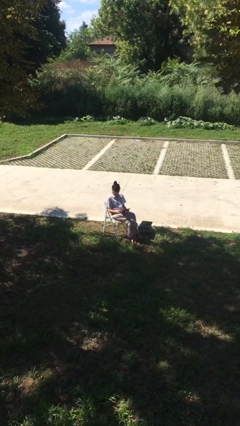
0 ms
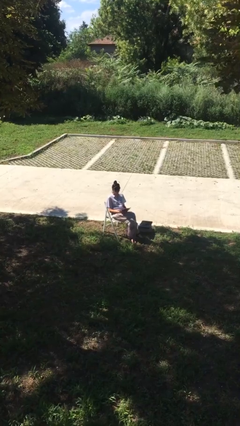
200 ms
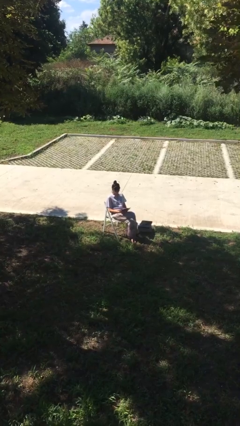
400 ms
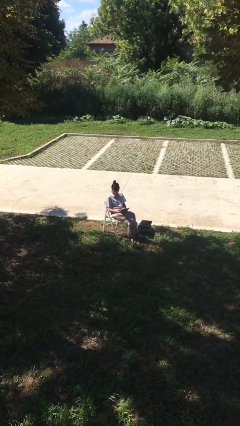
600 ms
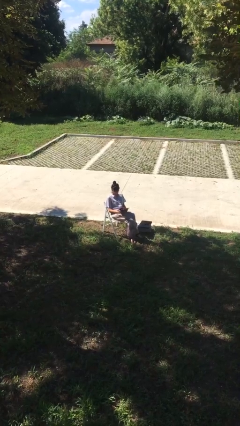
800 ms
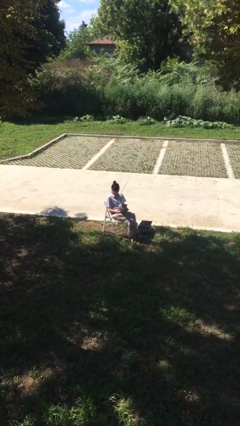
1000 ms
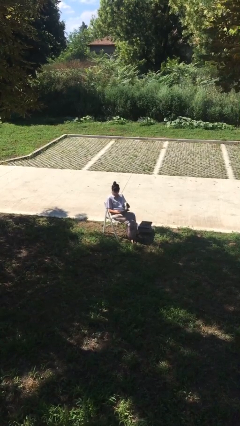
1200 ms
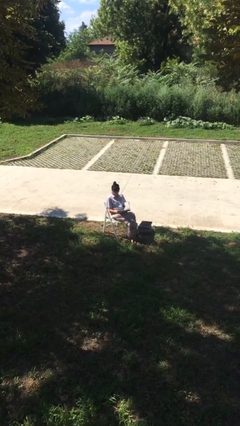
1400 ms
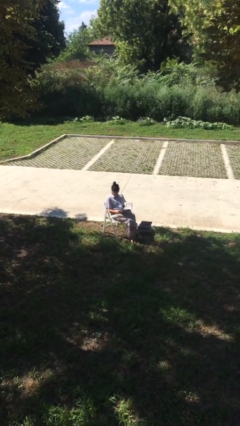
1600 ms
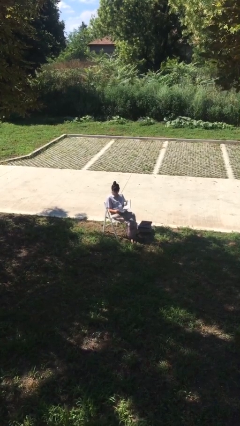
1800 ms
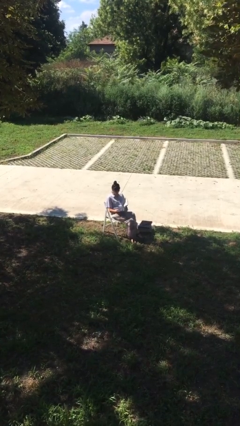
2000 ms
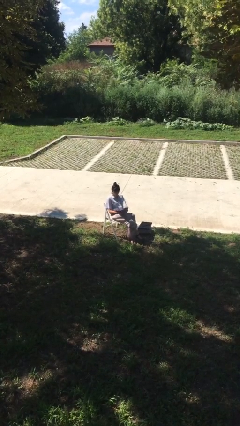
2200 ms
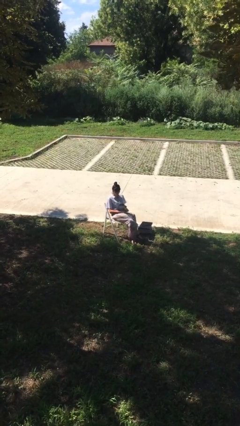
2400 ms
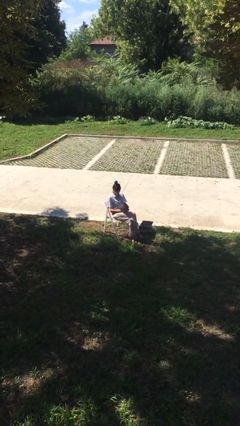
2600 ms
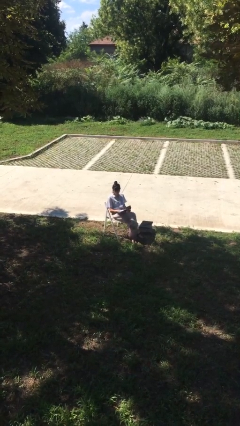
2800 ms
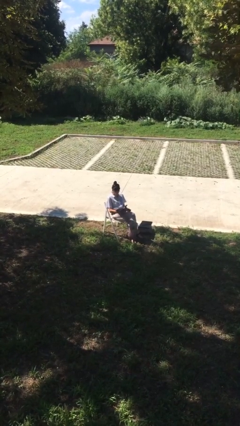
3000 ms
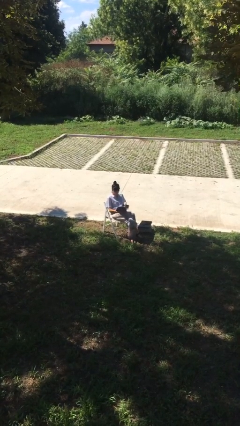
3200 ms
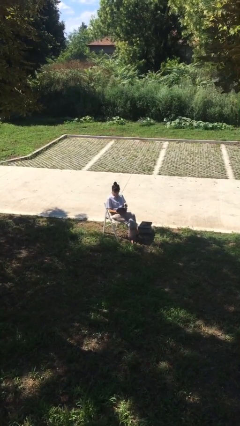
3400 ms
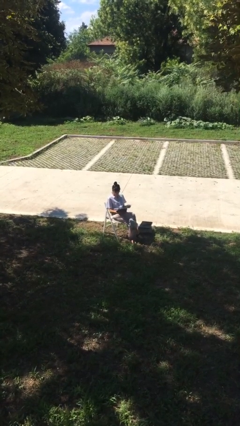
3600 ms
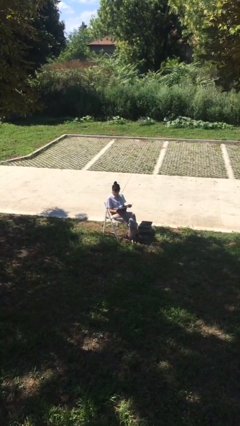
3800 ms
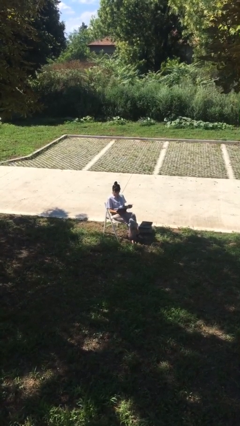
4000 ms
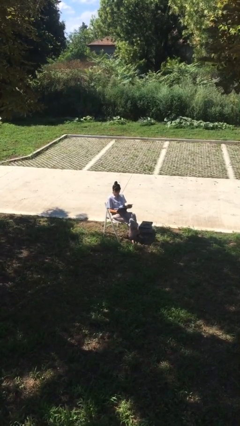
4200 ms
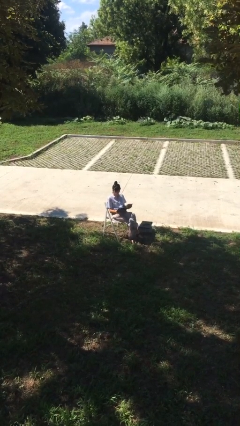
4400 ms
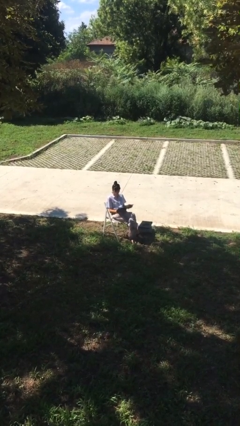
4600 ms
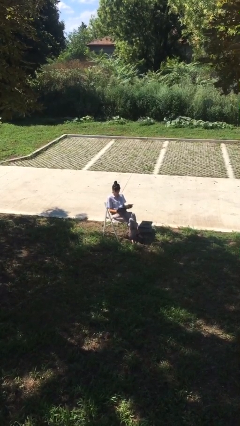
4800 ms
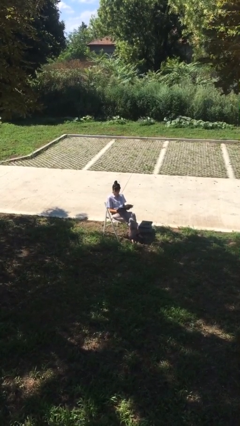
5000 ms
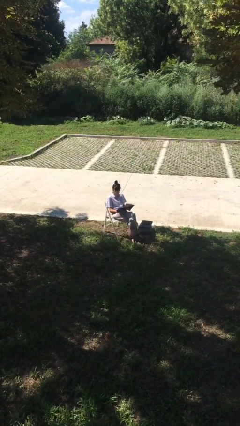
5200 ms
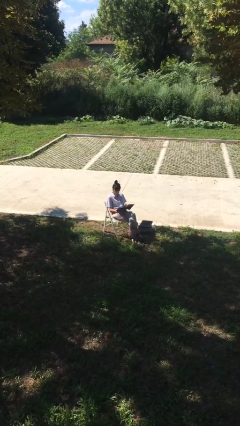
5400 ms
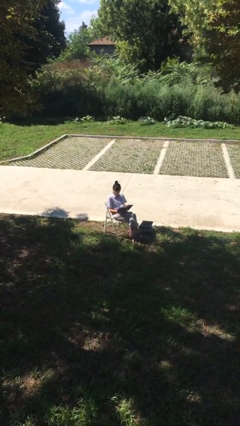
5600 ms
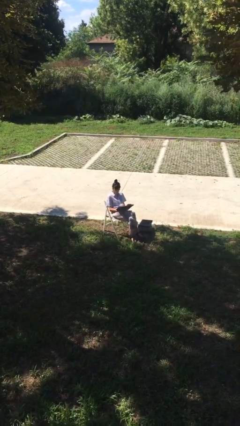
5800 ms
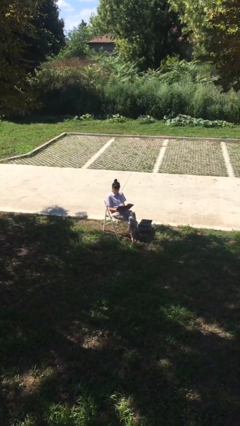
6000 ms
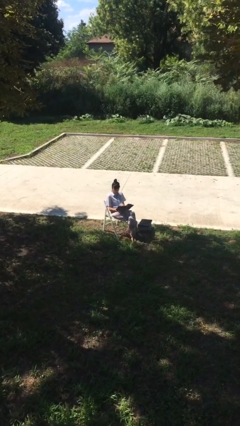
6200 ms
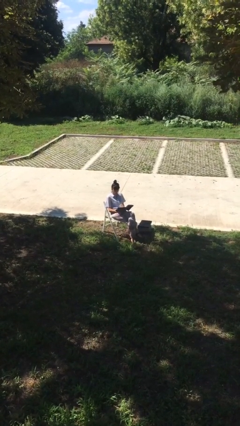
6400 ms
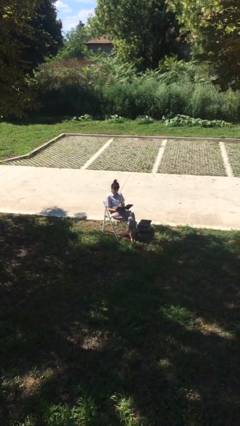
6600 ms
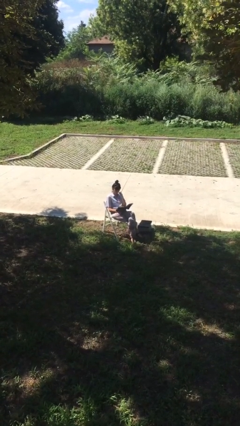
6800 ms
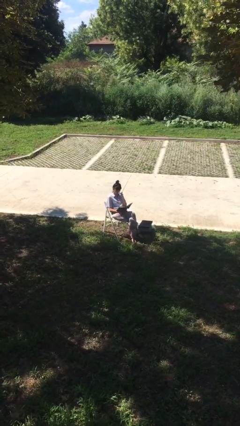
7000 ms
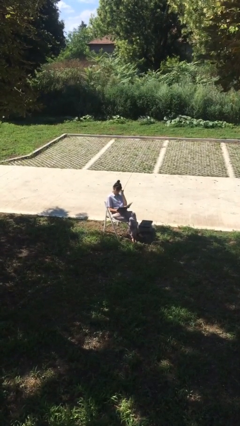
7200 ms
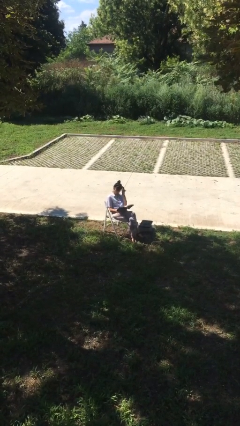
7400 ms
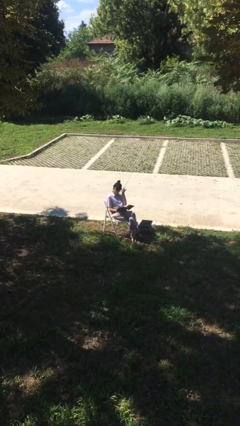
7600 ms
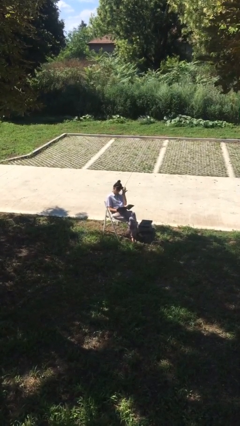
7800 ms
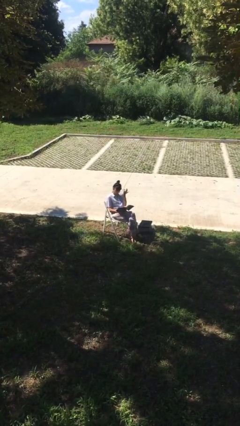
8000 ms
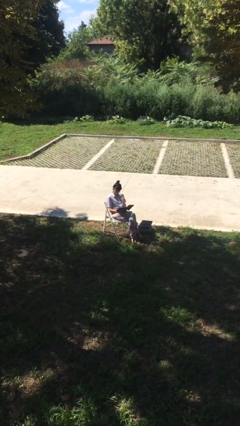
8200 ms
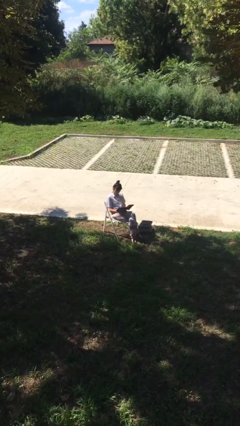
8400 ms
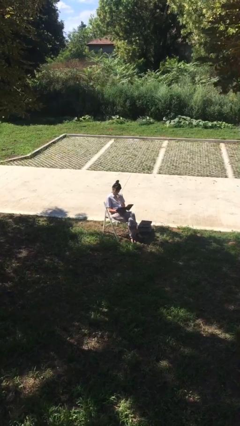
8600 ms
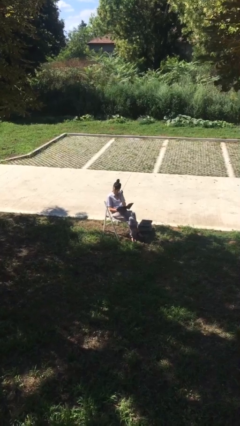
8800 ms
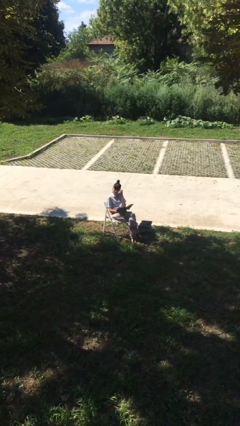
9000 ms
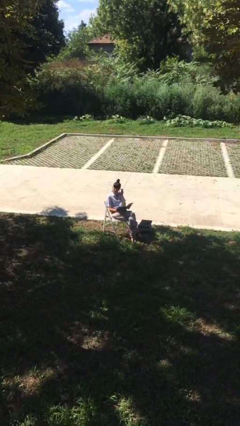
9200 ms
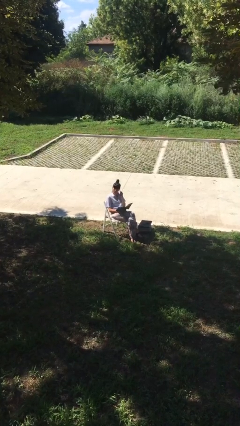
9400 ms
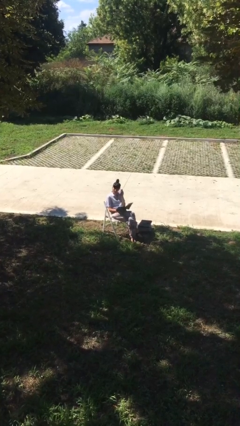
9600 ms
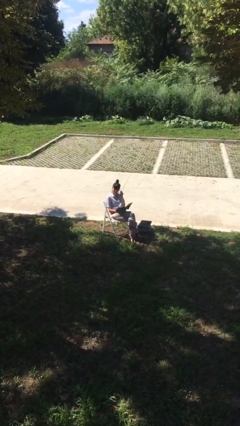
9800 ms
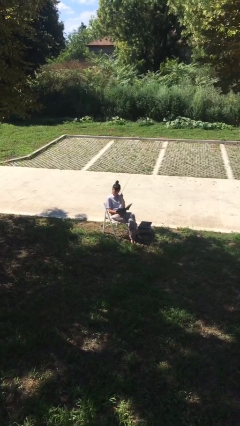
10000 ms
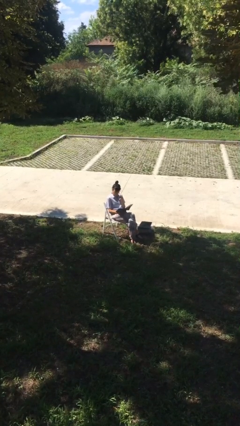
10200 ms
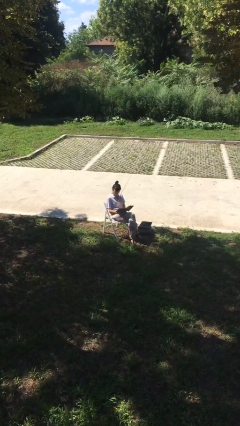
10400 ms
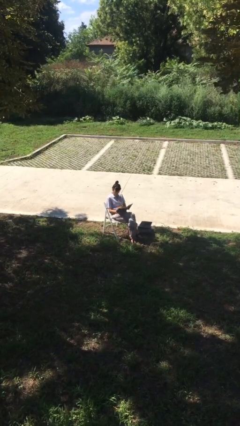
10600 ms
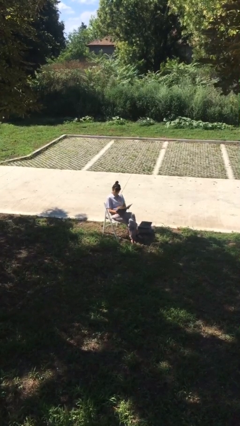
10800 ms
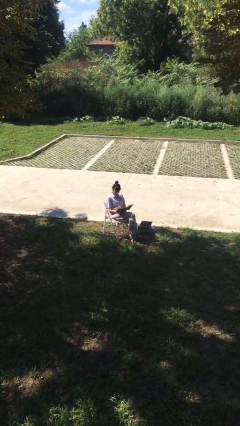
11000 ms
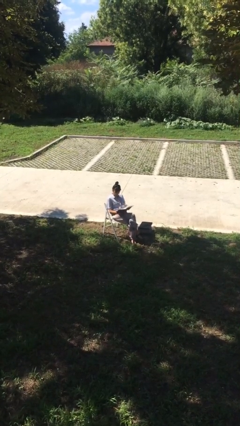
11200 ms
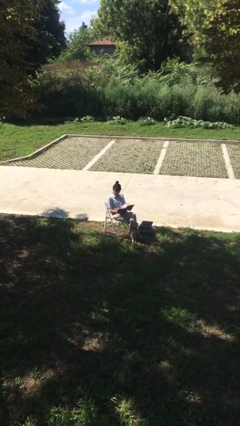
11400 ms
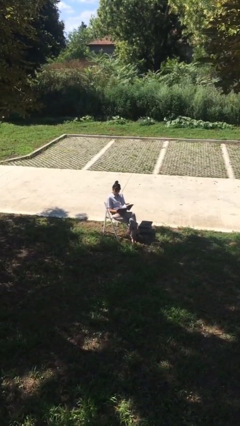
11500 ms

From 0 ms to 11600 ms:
person reads document

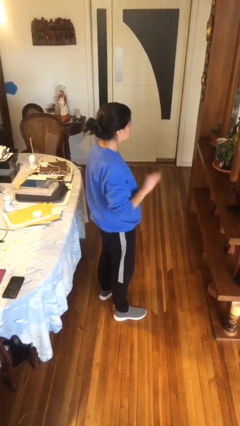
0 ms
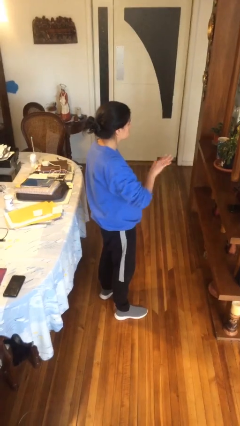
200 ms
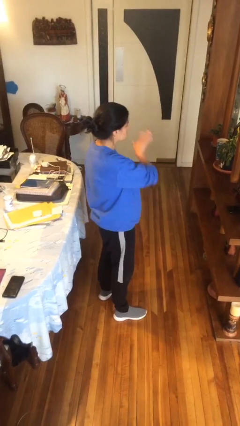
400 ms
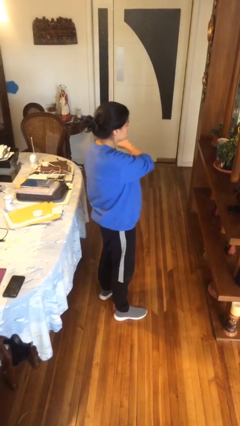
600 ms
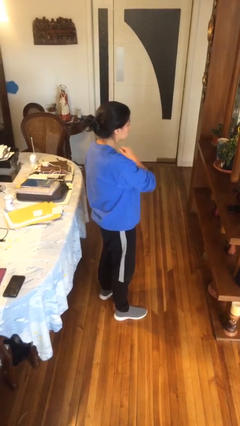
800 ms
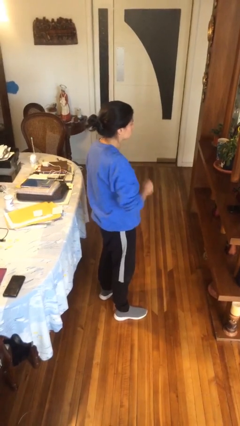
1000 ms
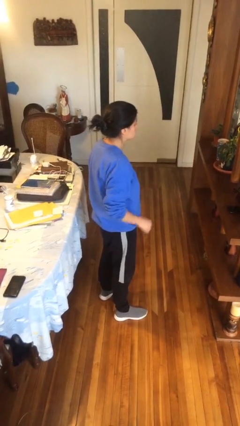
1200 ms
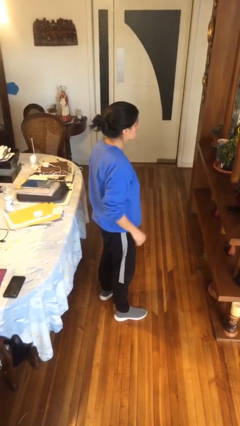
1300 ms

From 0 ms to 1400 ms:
person gestures swipe left

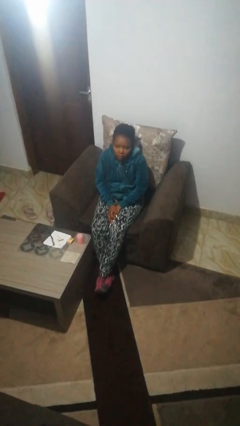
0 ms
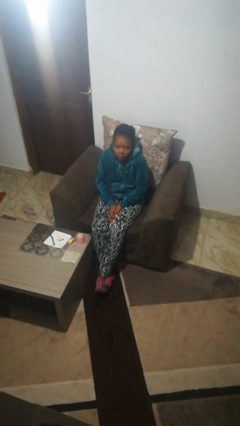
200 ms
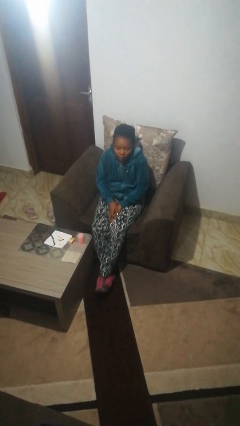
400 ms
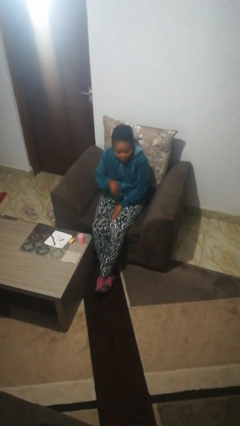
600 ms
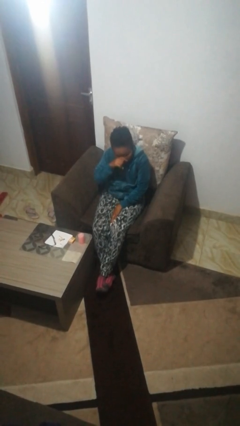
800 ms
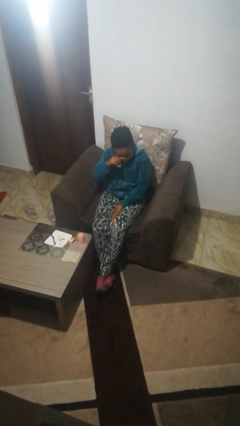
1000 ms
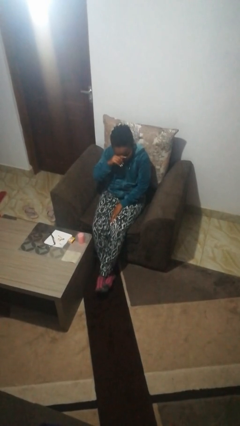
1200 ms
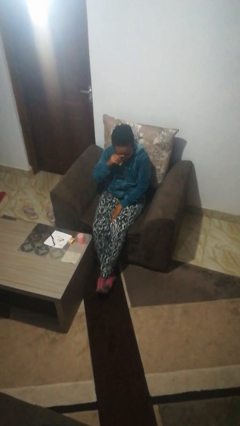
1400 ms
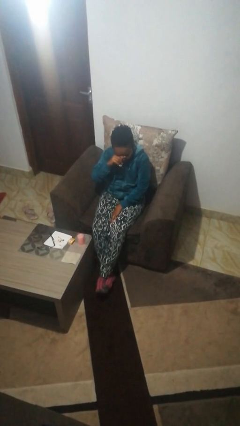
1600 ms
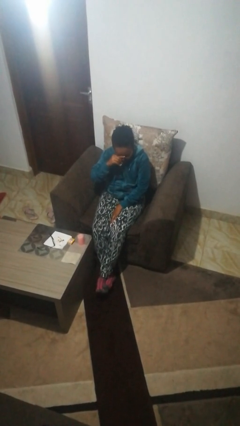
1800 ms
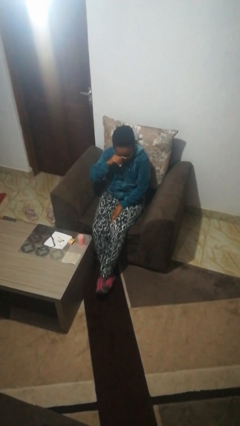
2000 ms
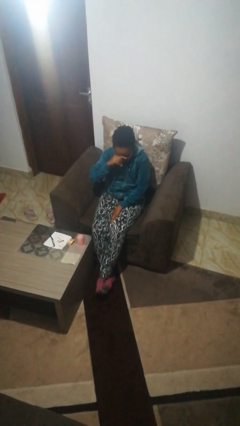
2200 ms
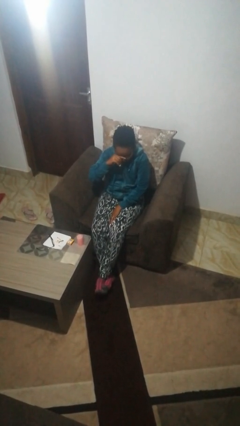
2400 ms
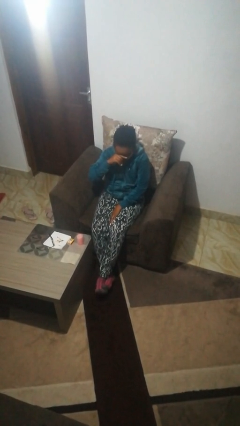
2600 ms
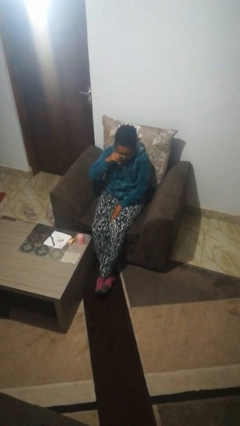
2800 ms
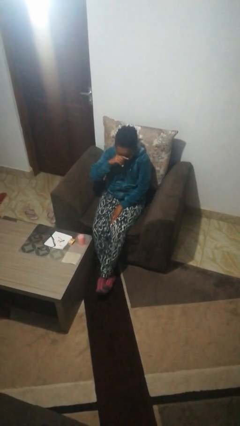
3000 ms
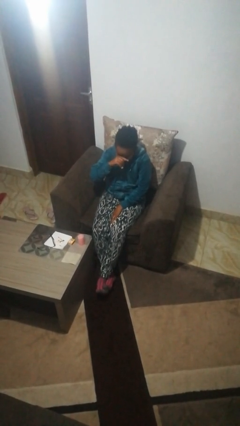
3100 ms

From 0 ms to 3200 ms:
person rubs eyes

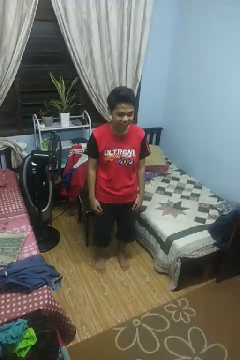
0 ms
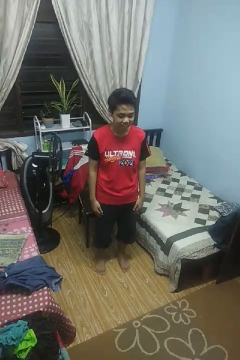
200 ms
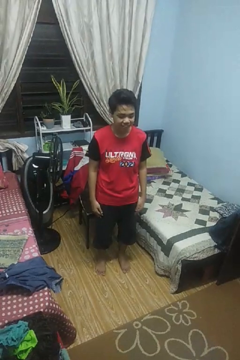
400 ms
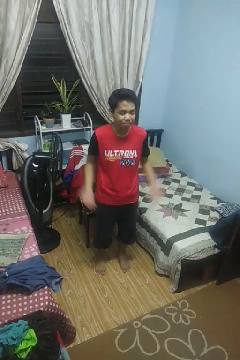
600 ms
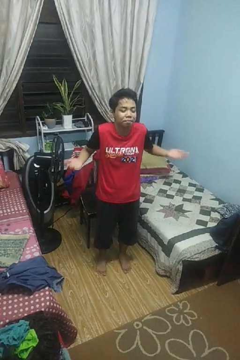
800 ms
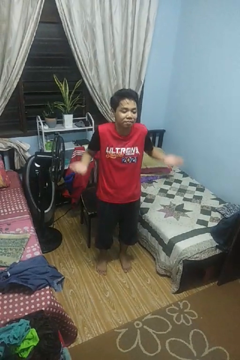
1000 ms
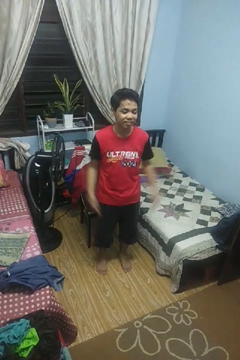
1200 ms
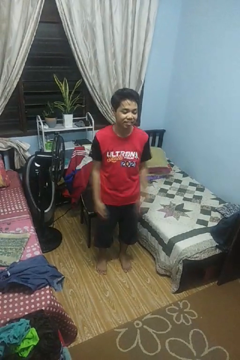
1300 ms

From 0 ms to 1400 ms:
person shrugs

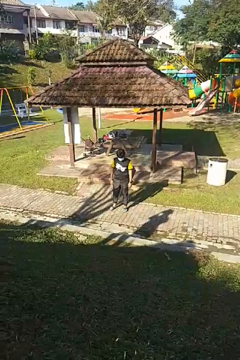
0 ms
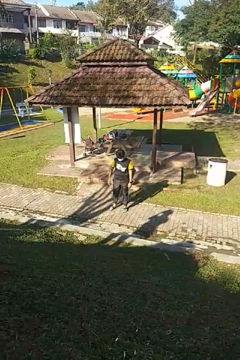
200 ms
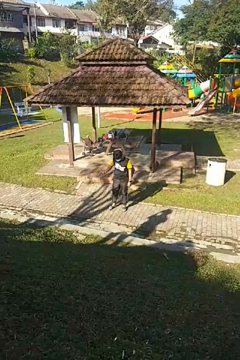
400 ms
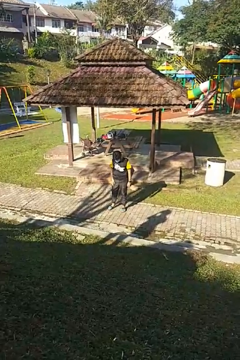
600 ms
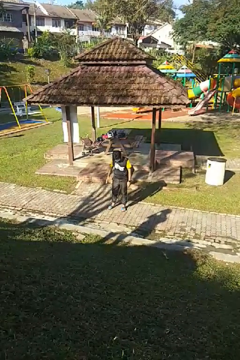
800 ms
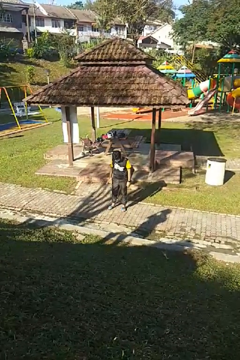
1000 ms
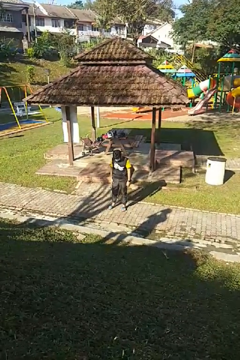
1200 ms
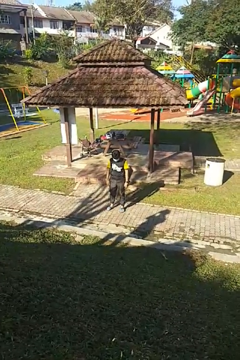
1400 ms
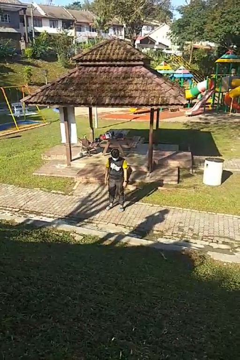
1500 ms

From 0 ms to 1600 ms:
person slaps hands on thighs
